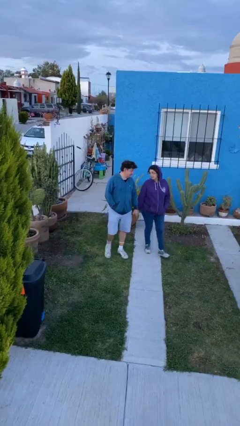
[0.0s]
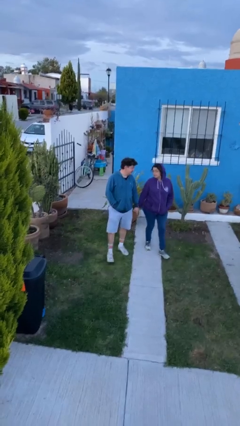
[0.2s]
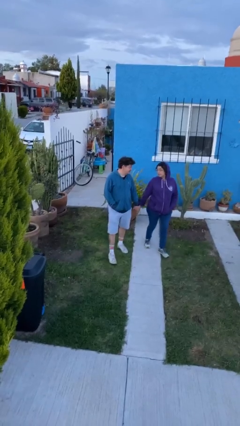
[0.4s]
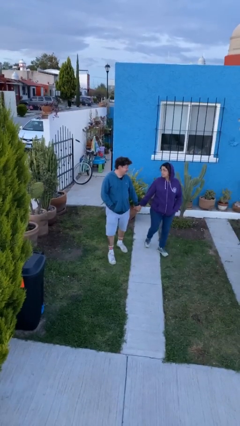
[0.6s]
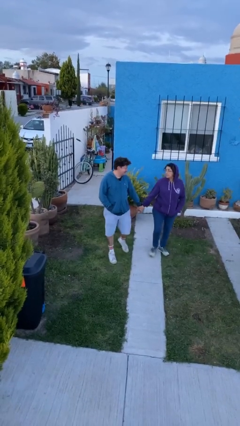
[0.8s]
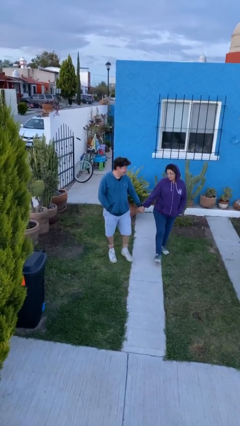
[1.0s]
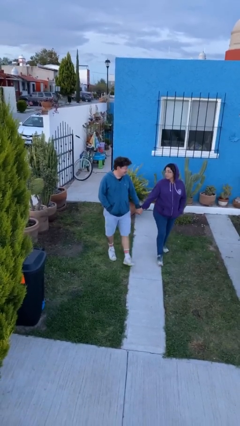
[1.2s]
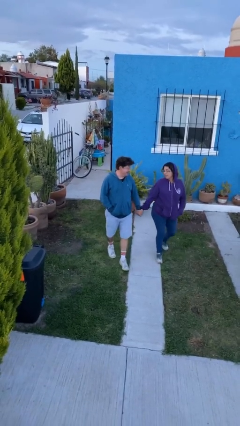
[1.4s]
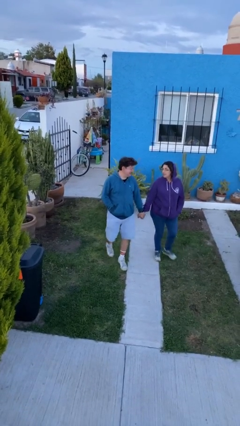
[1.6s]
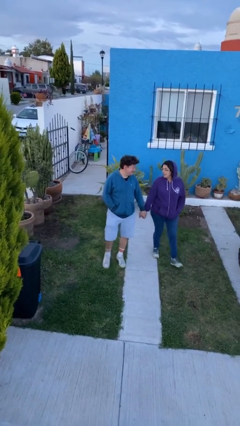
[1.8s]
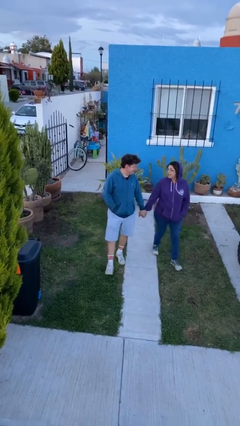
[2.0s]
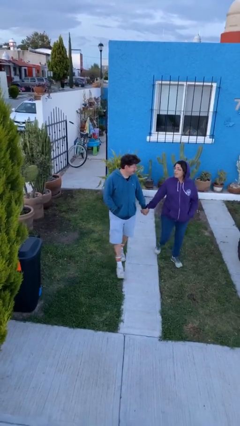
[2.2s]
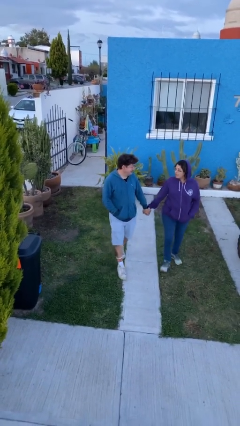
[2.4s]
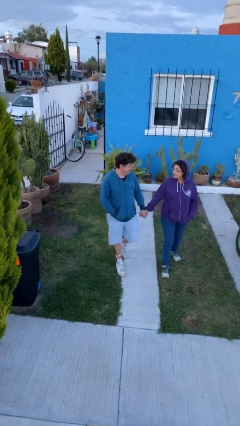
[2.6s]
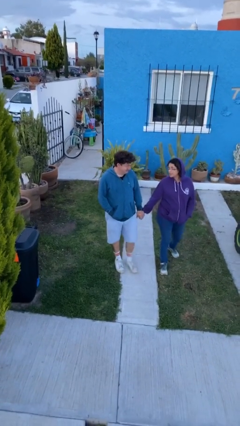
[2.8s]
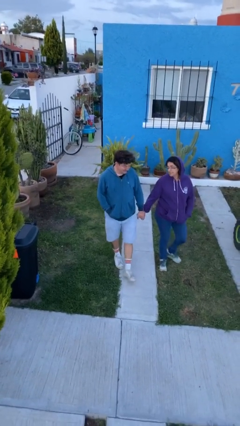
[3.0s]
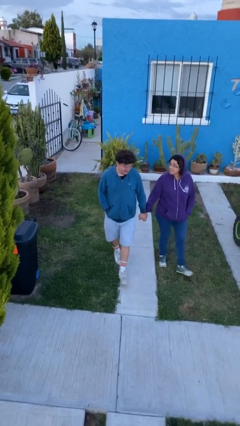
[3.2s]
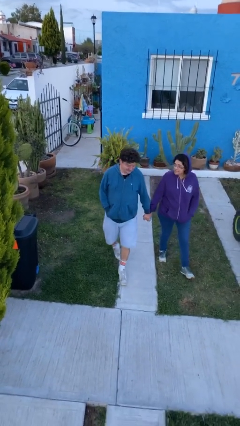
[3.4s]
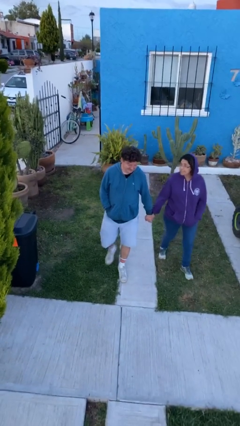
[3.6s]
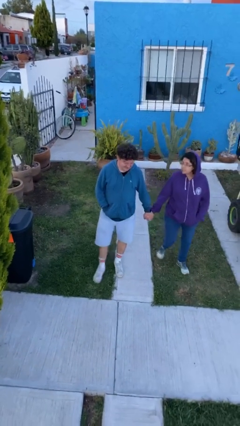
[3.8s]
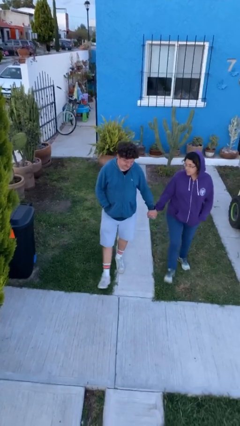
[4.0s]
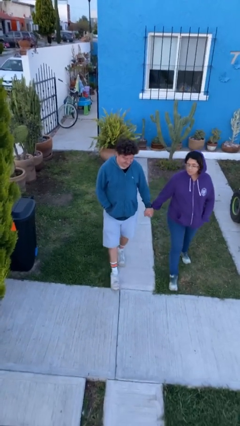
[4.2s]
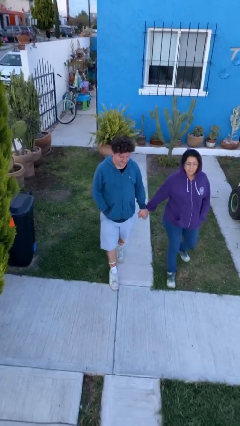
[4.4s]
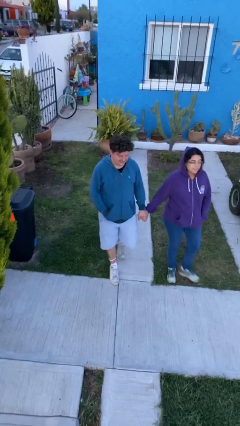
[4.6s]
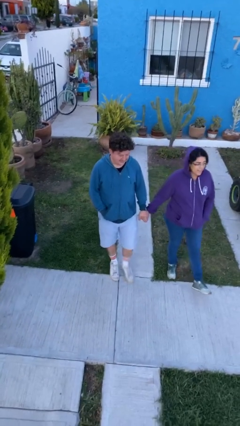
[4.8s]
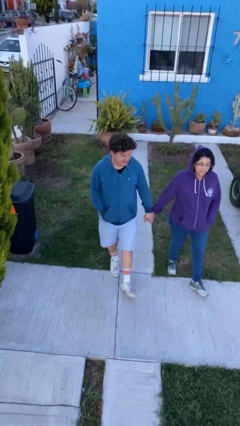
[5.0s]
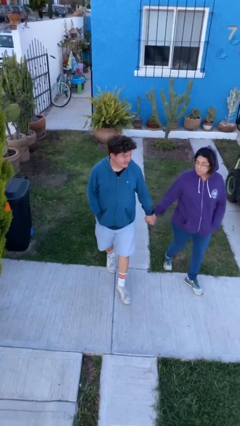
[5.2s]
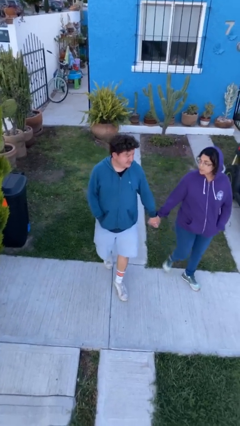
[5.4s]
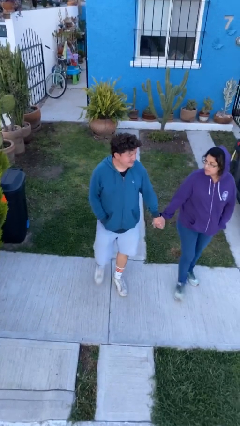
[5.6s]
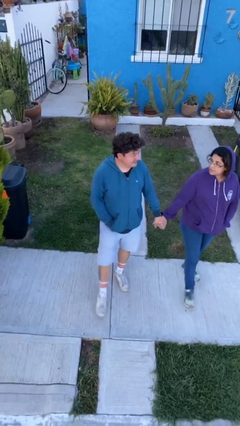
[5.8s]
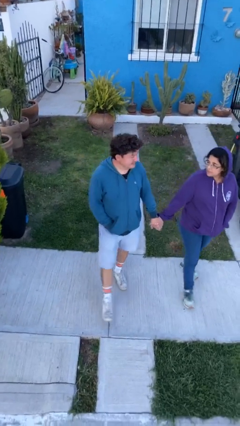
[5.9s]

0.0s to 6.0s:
person holds hand

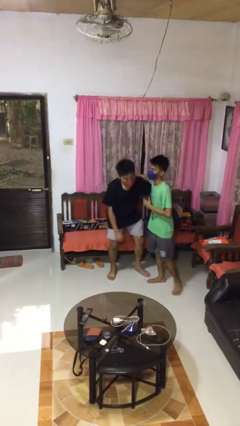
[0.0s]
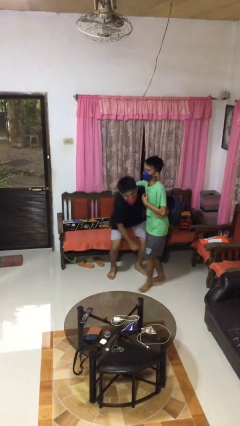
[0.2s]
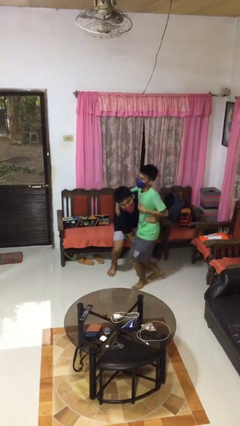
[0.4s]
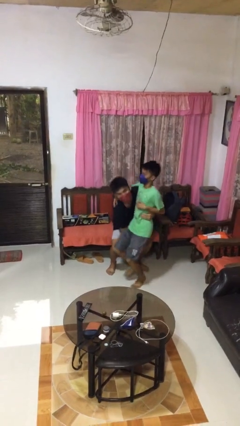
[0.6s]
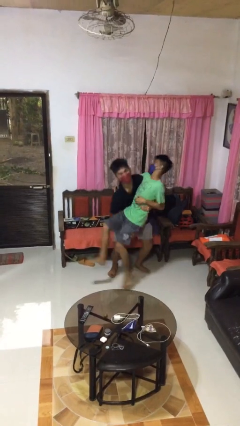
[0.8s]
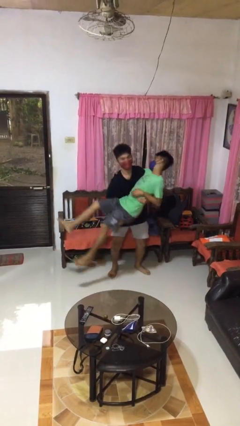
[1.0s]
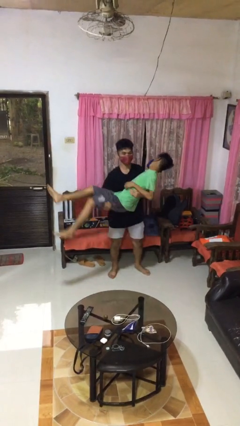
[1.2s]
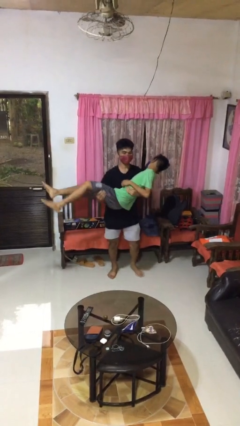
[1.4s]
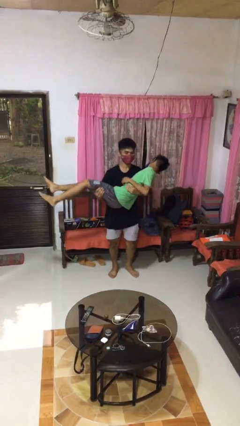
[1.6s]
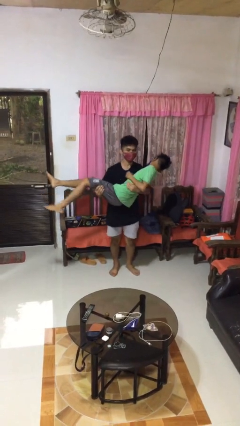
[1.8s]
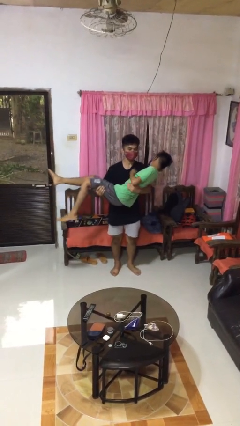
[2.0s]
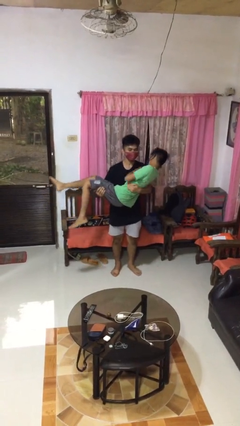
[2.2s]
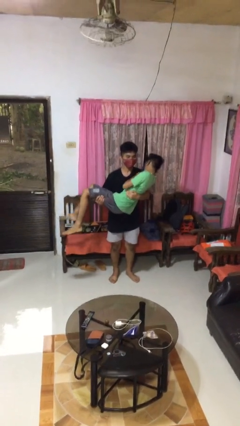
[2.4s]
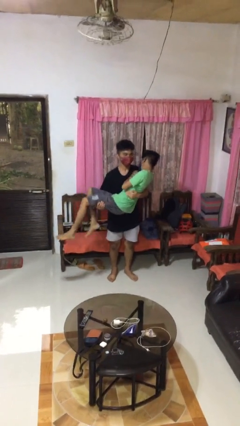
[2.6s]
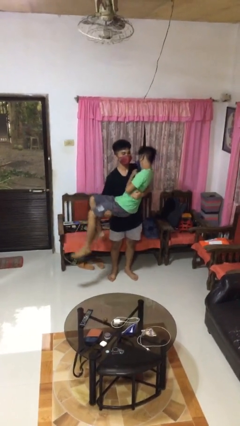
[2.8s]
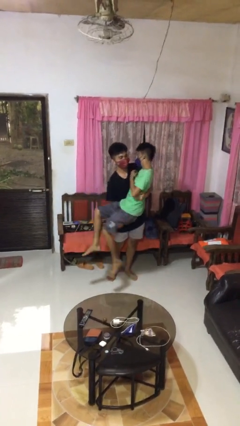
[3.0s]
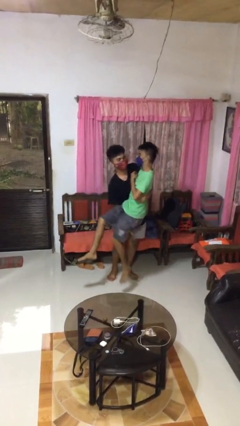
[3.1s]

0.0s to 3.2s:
person picks up person

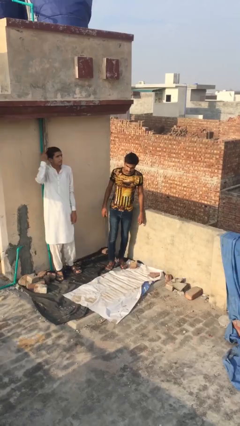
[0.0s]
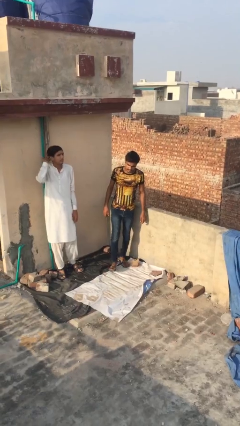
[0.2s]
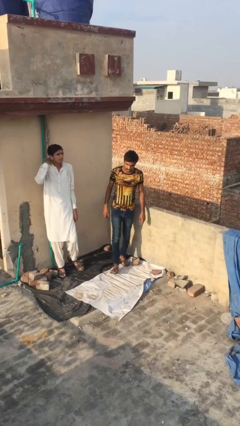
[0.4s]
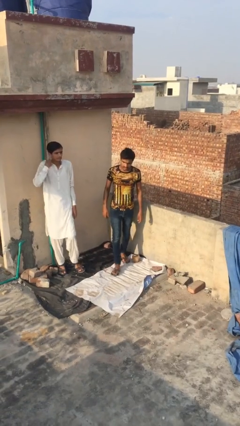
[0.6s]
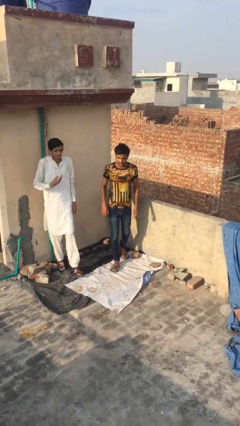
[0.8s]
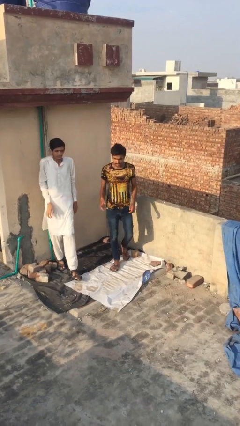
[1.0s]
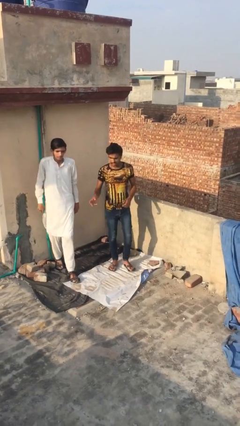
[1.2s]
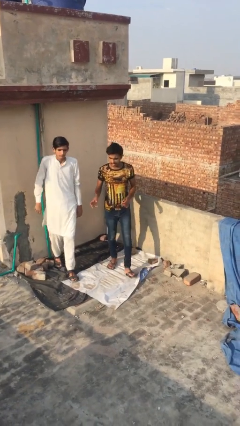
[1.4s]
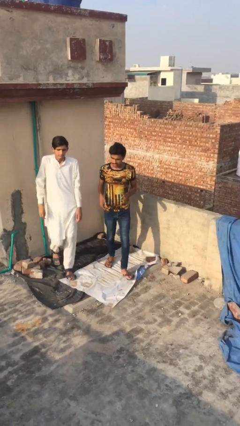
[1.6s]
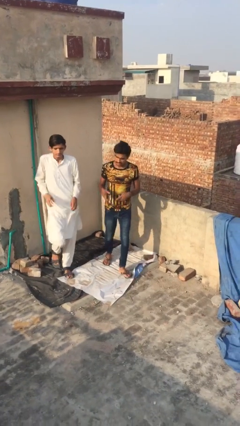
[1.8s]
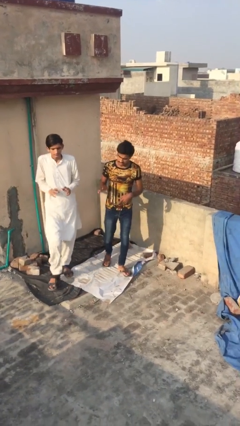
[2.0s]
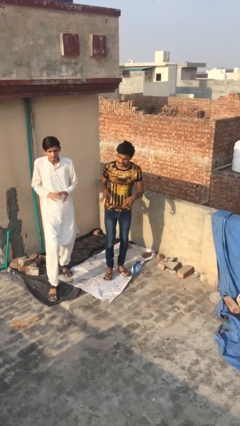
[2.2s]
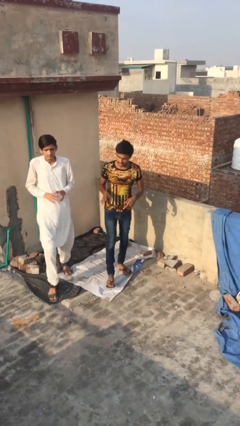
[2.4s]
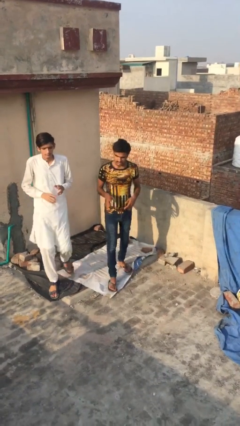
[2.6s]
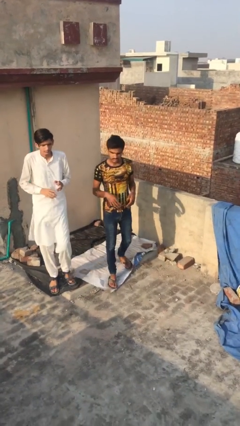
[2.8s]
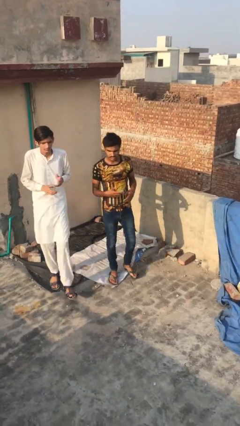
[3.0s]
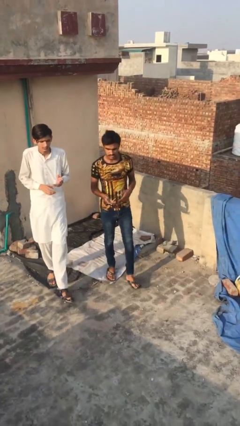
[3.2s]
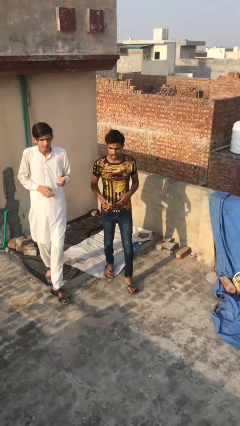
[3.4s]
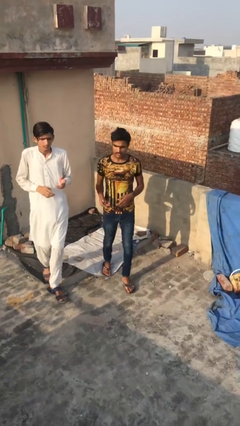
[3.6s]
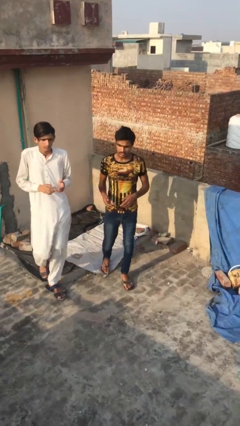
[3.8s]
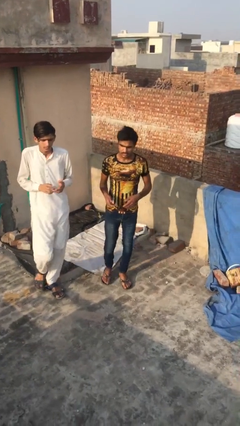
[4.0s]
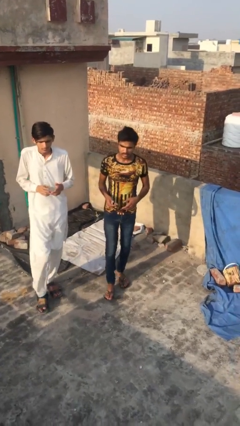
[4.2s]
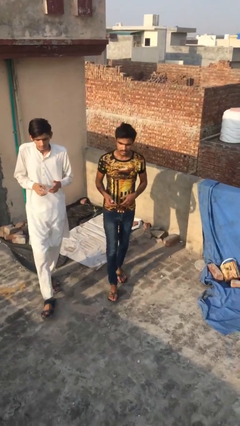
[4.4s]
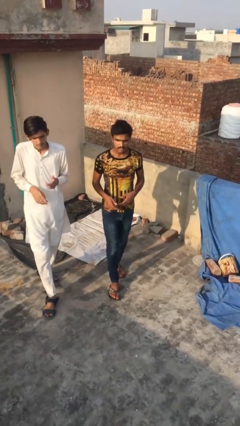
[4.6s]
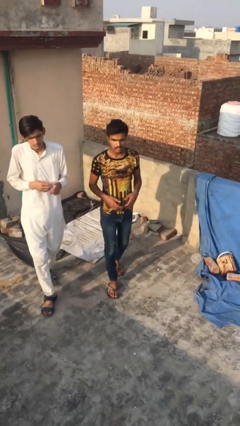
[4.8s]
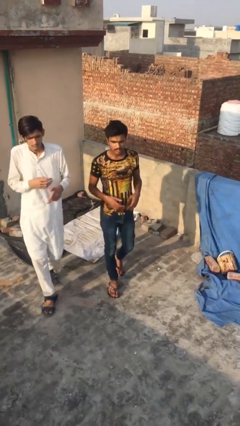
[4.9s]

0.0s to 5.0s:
person talks to person

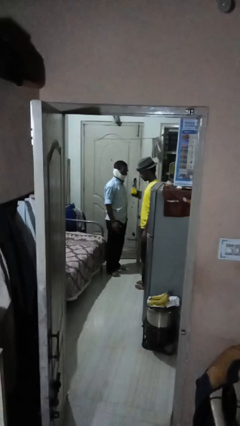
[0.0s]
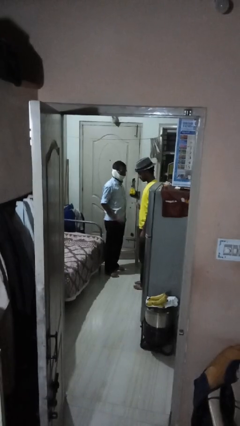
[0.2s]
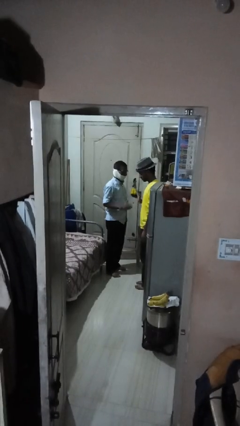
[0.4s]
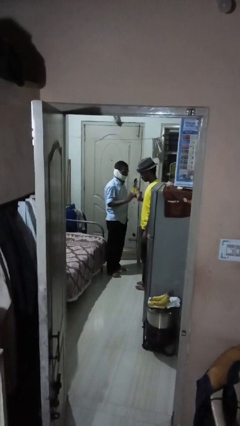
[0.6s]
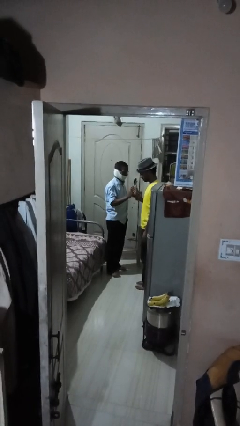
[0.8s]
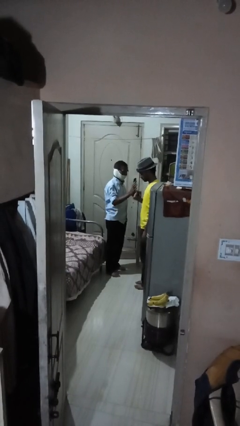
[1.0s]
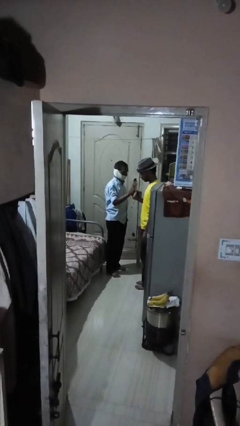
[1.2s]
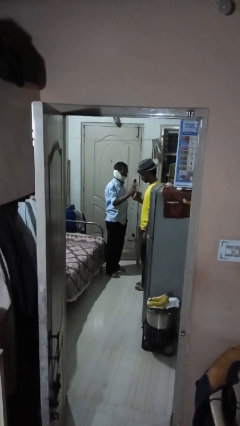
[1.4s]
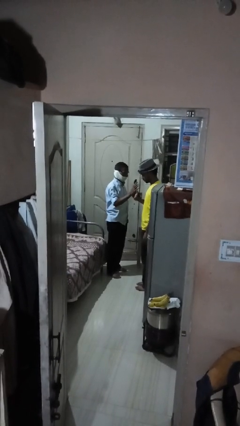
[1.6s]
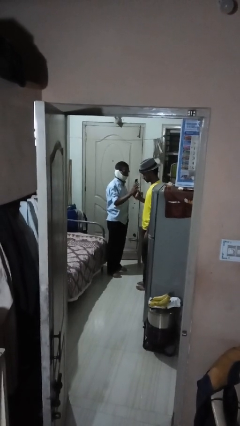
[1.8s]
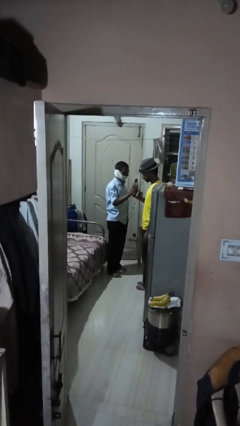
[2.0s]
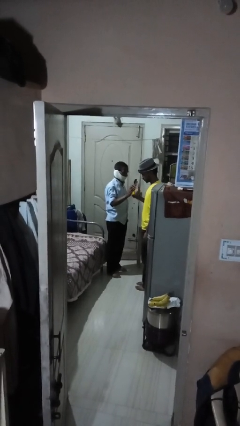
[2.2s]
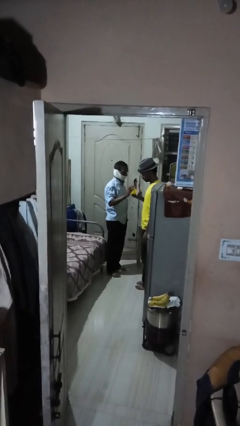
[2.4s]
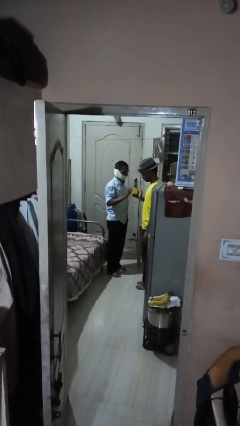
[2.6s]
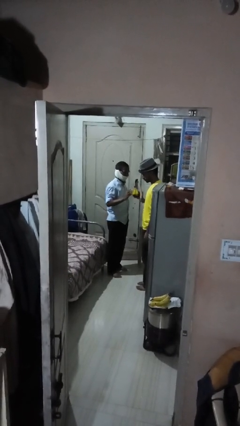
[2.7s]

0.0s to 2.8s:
person highfives hand

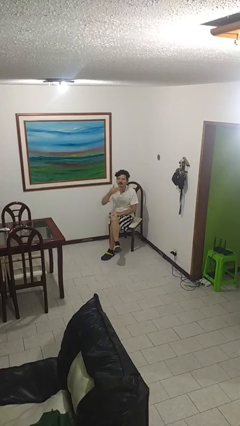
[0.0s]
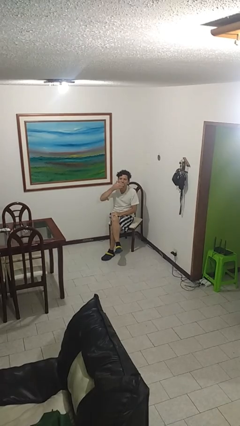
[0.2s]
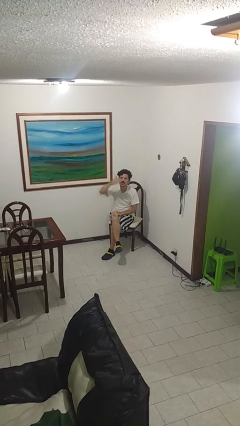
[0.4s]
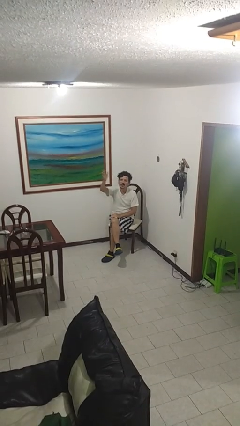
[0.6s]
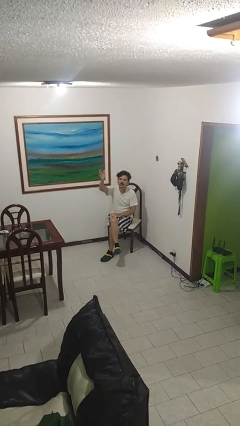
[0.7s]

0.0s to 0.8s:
person gestures blow kiss
